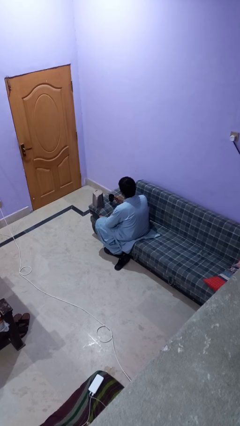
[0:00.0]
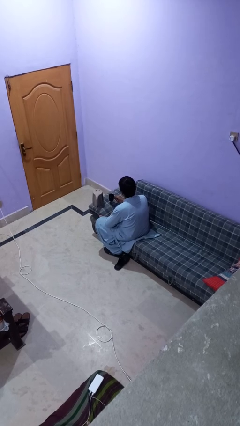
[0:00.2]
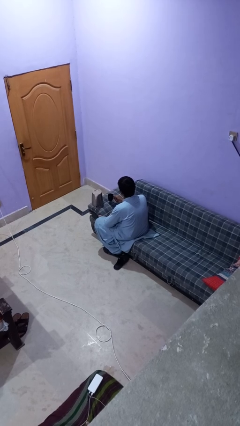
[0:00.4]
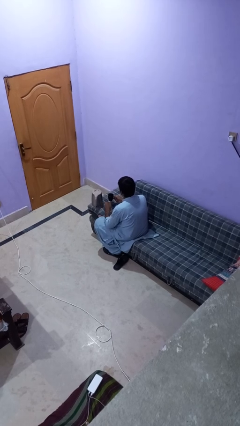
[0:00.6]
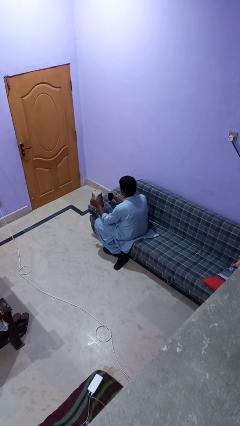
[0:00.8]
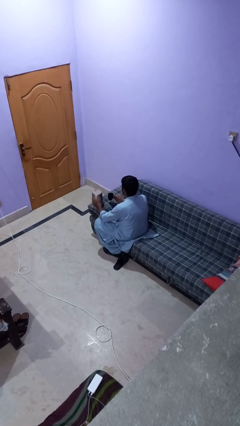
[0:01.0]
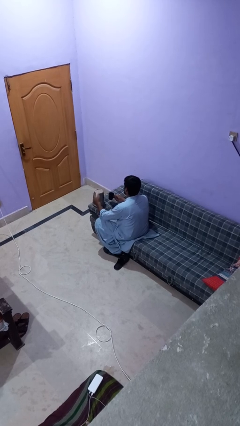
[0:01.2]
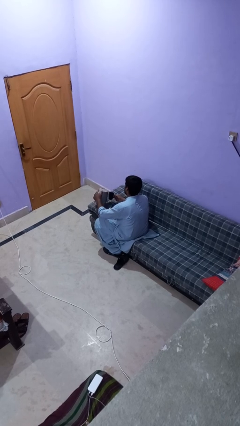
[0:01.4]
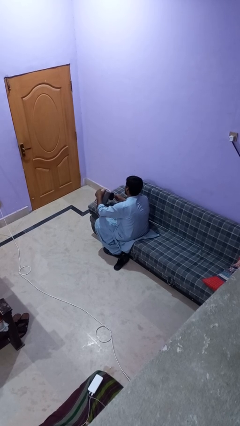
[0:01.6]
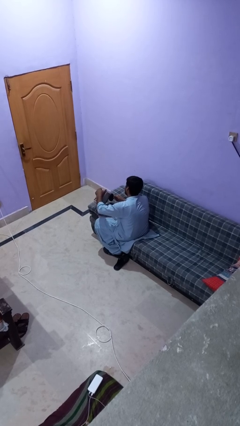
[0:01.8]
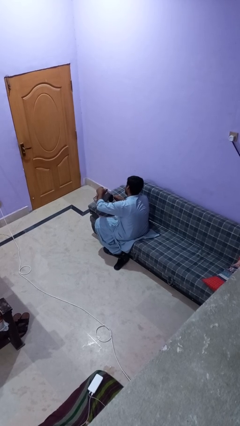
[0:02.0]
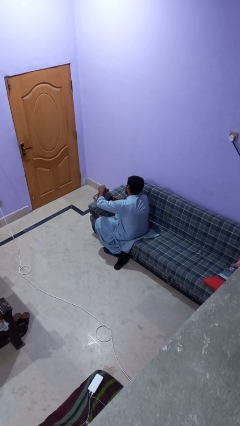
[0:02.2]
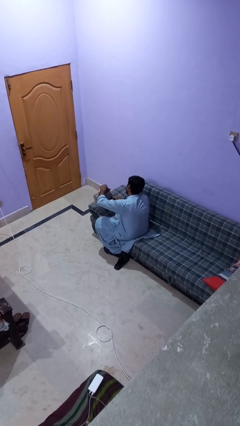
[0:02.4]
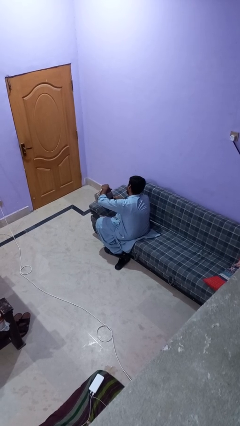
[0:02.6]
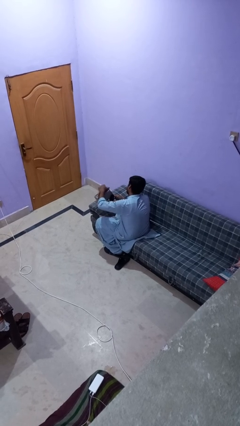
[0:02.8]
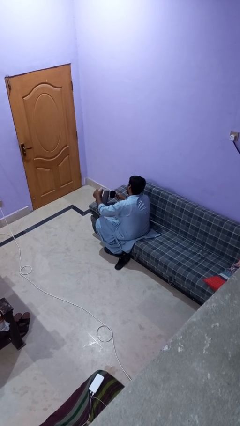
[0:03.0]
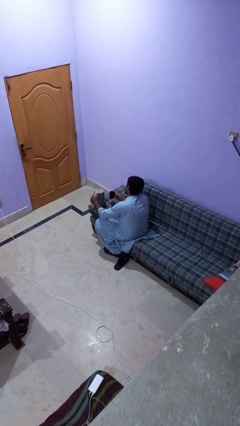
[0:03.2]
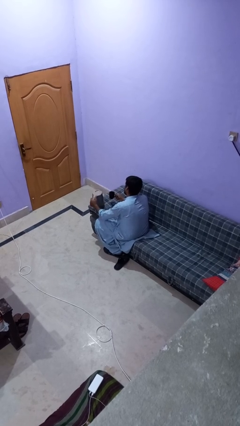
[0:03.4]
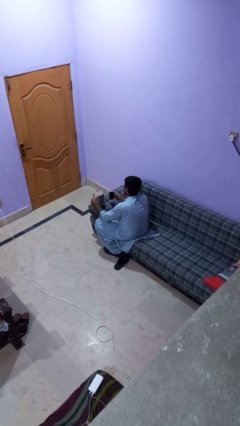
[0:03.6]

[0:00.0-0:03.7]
person pours coffee into mug

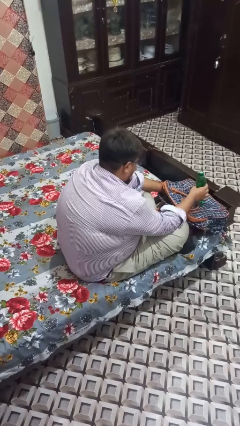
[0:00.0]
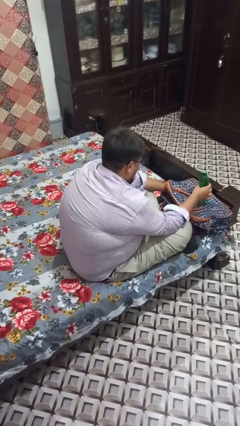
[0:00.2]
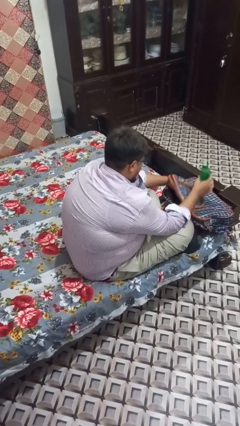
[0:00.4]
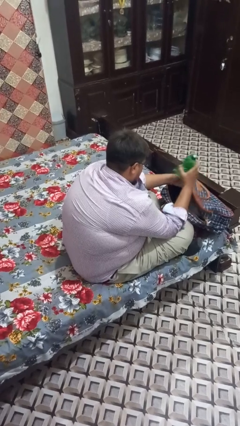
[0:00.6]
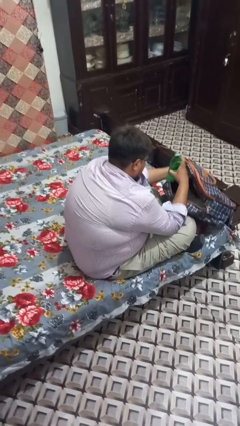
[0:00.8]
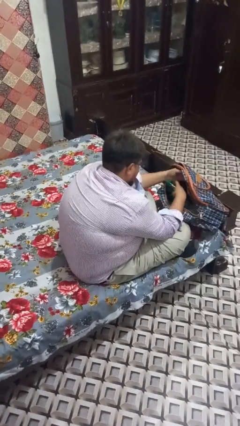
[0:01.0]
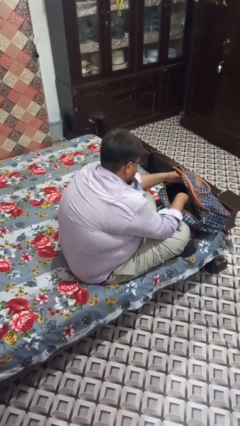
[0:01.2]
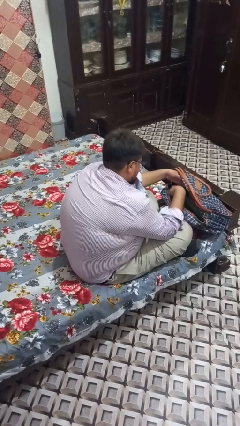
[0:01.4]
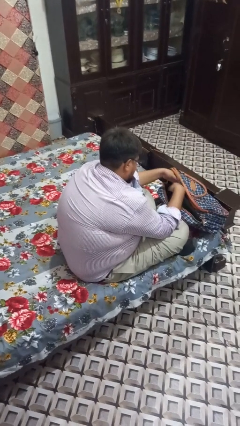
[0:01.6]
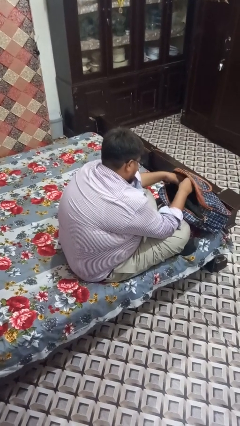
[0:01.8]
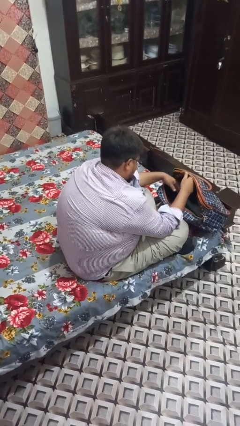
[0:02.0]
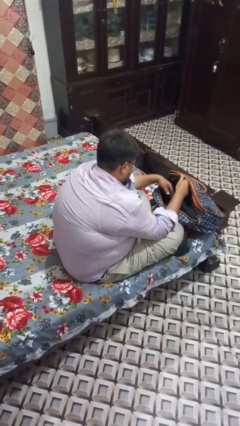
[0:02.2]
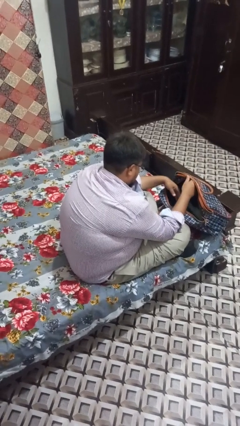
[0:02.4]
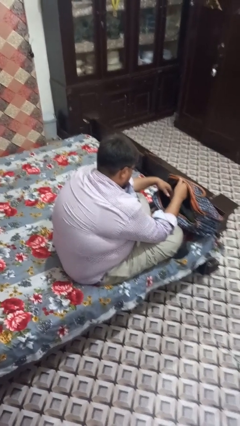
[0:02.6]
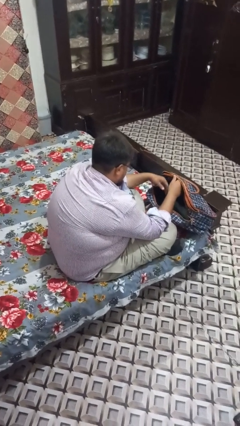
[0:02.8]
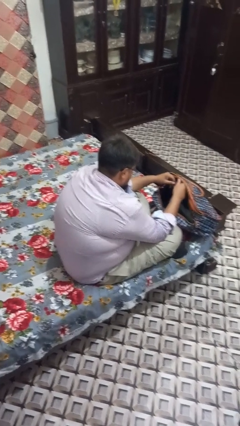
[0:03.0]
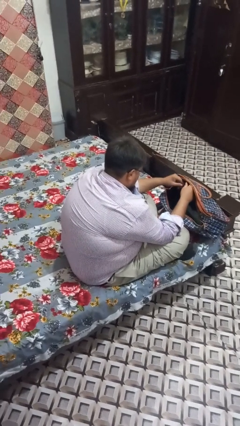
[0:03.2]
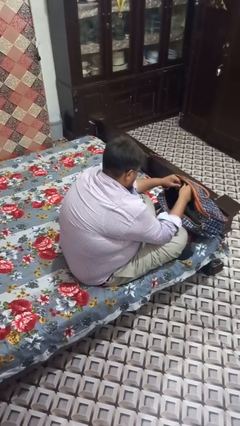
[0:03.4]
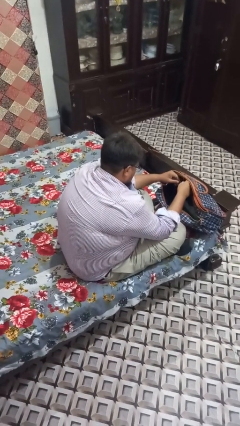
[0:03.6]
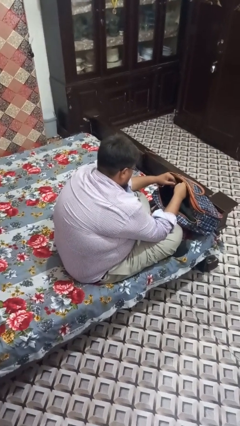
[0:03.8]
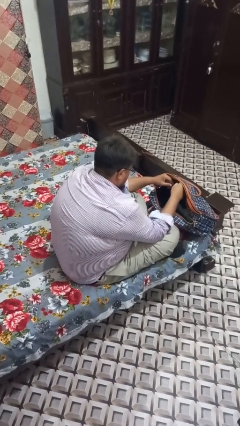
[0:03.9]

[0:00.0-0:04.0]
person puts object into backpack

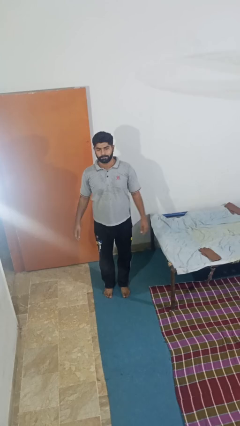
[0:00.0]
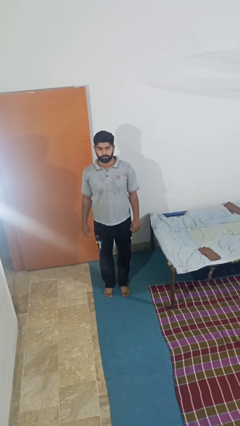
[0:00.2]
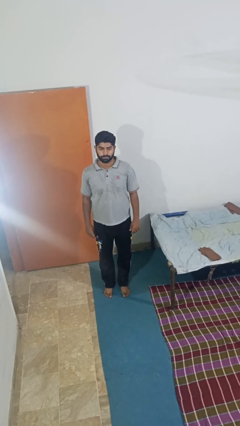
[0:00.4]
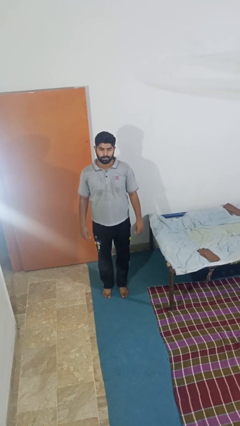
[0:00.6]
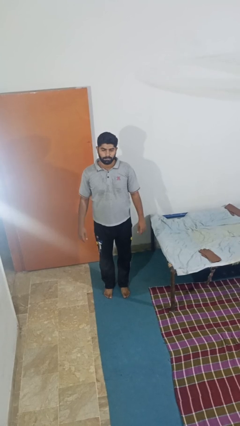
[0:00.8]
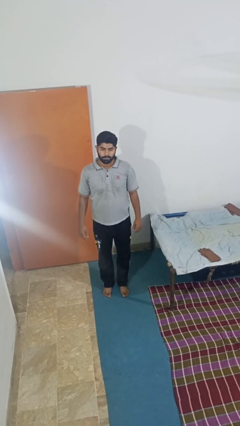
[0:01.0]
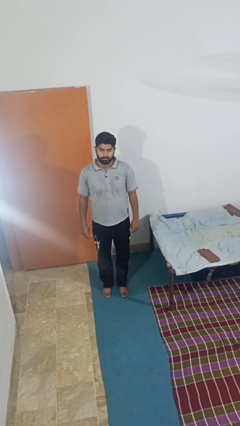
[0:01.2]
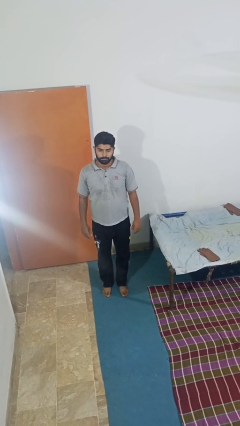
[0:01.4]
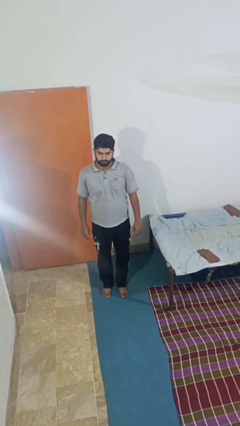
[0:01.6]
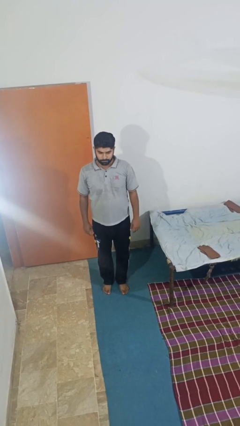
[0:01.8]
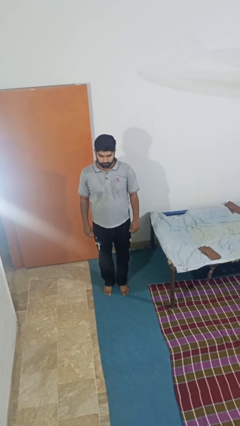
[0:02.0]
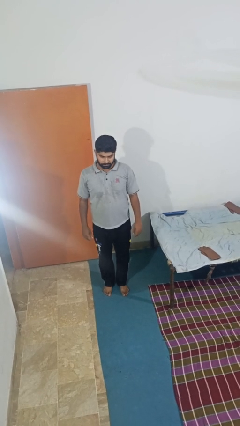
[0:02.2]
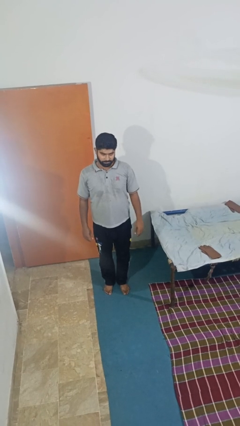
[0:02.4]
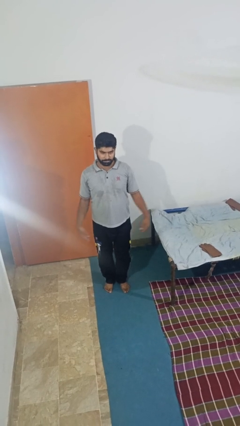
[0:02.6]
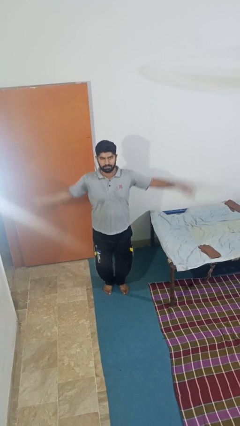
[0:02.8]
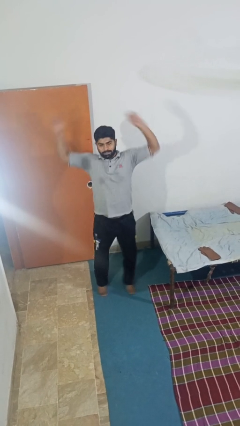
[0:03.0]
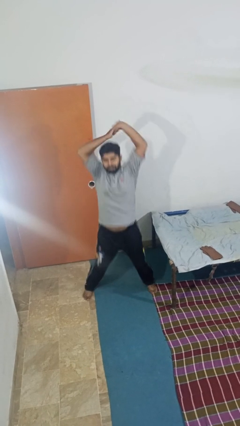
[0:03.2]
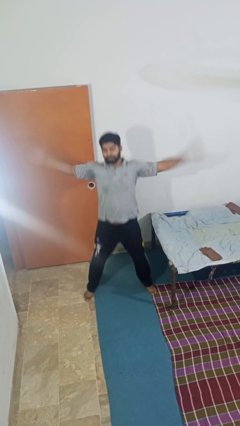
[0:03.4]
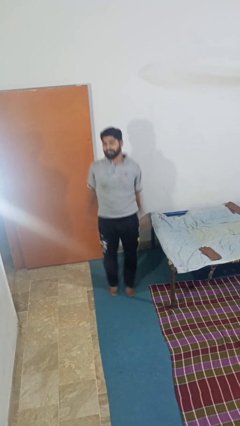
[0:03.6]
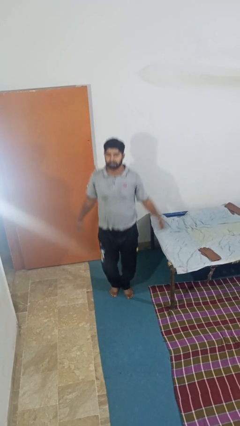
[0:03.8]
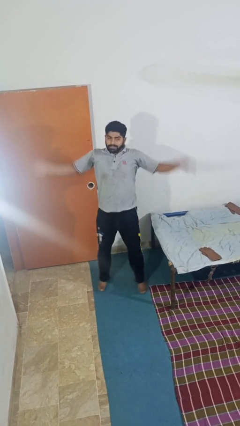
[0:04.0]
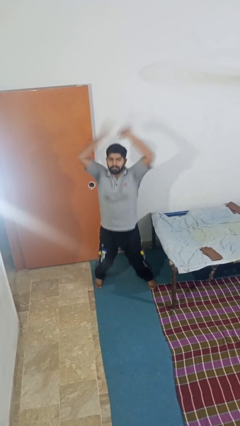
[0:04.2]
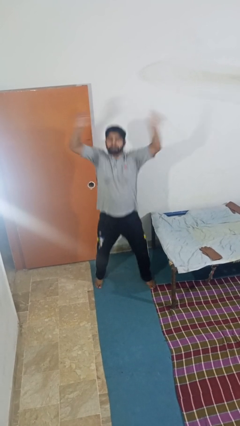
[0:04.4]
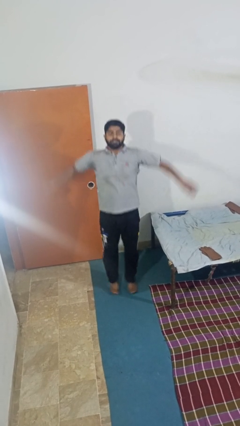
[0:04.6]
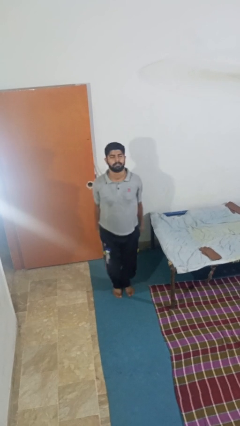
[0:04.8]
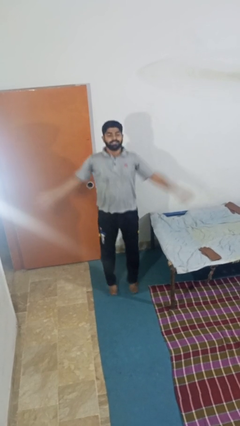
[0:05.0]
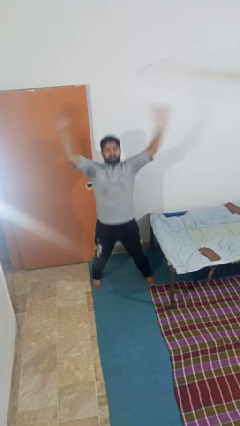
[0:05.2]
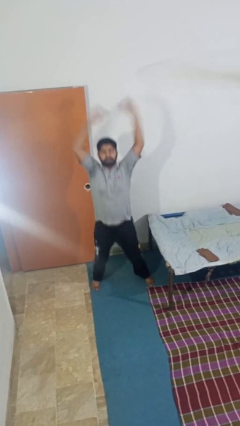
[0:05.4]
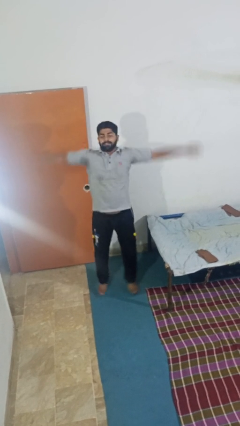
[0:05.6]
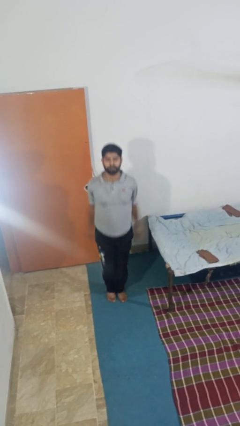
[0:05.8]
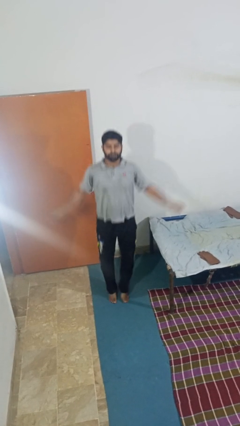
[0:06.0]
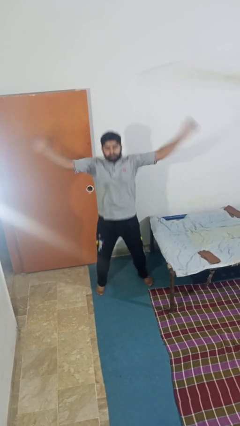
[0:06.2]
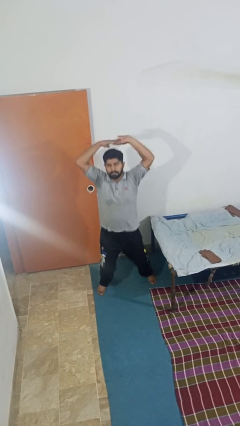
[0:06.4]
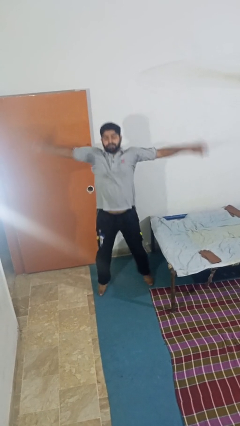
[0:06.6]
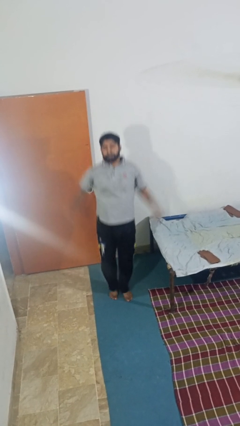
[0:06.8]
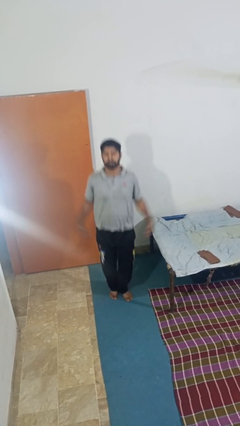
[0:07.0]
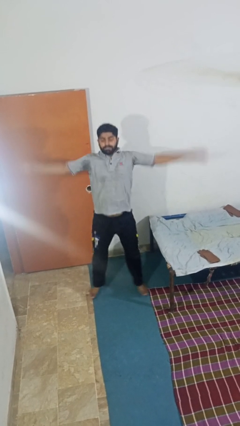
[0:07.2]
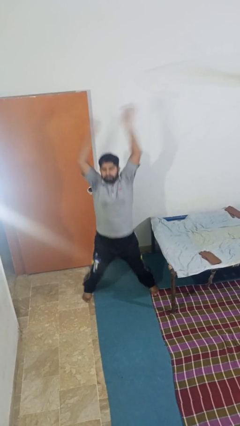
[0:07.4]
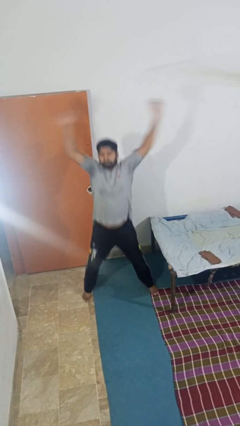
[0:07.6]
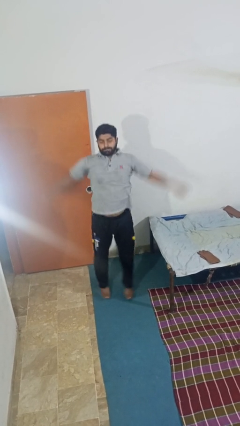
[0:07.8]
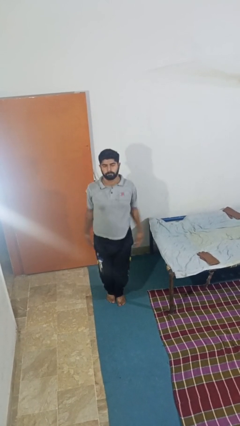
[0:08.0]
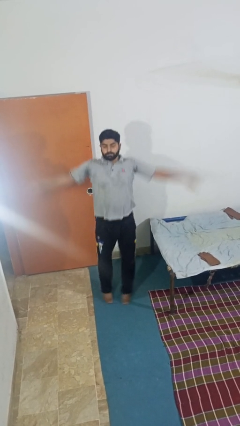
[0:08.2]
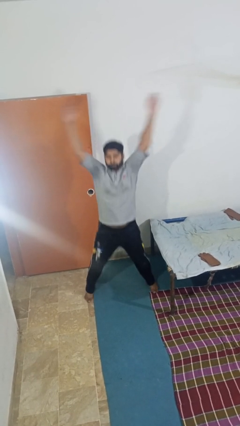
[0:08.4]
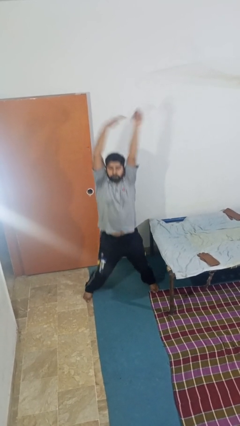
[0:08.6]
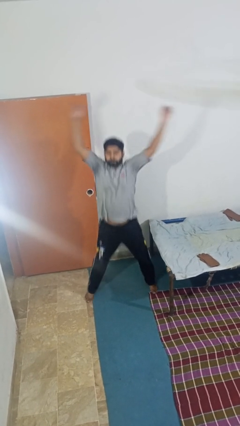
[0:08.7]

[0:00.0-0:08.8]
person exercises with jumping jacks

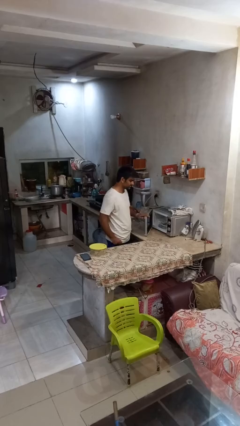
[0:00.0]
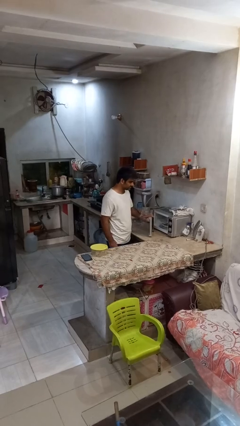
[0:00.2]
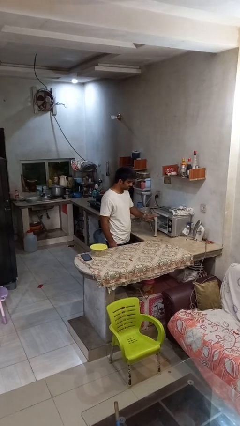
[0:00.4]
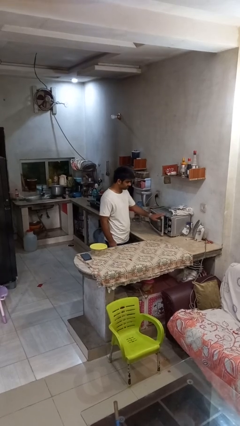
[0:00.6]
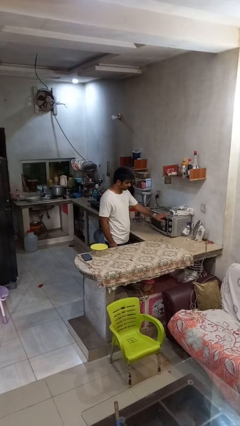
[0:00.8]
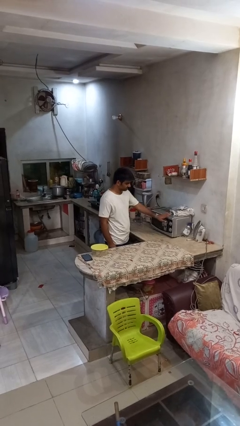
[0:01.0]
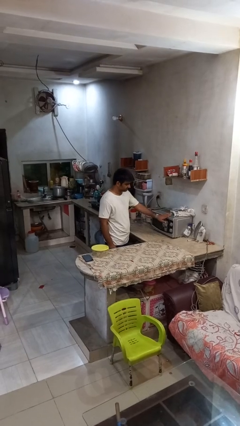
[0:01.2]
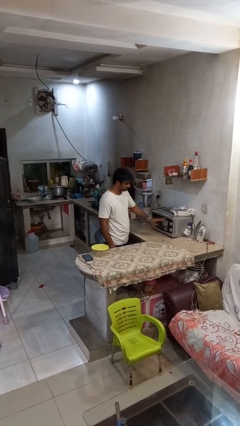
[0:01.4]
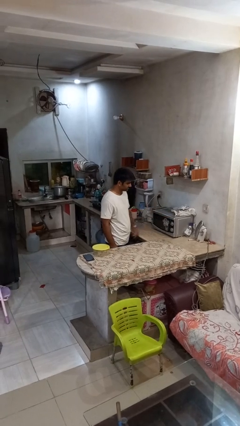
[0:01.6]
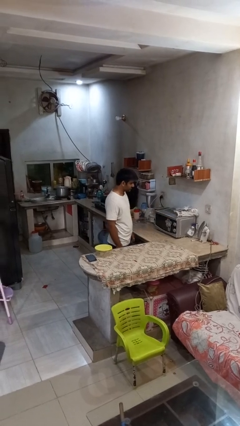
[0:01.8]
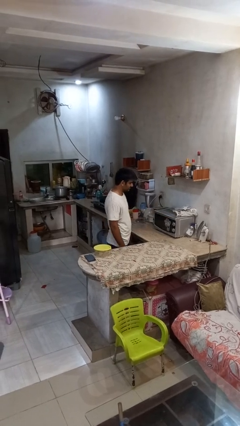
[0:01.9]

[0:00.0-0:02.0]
person closes microwave
